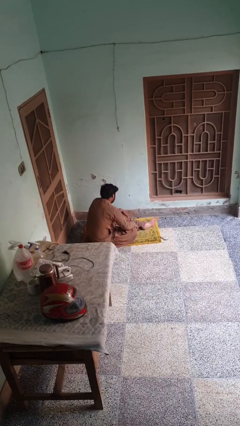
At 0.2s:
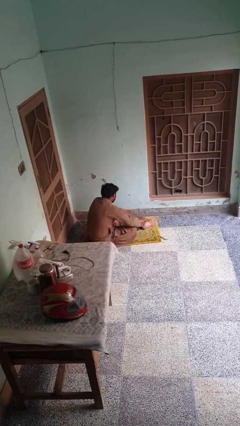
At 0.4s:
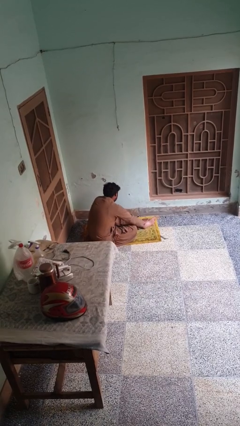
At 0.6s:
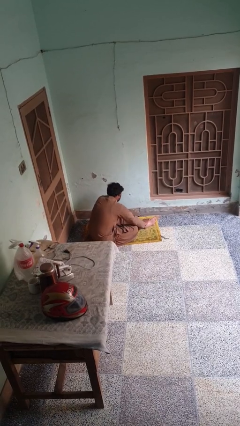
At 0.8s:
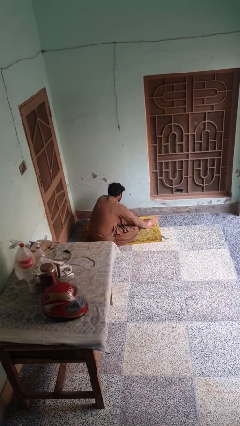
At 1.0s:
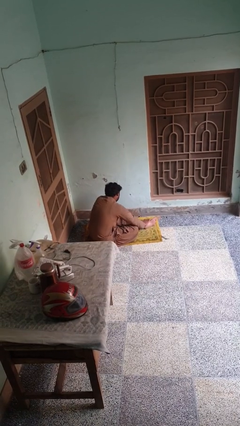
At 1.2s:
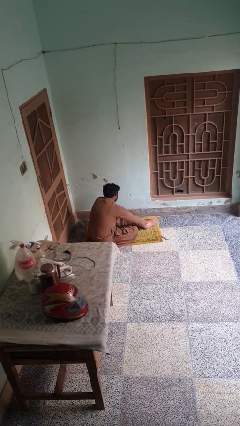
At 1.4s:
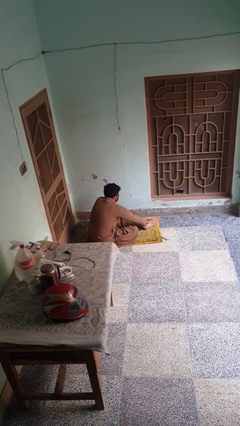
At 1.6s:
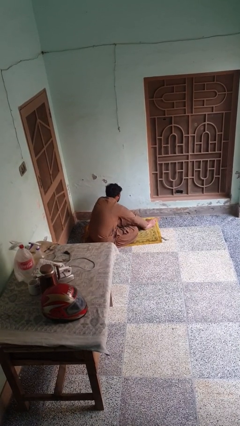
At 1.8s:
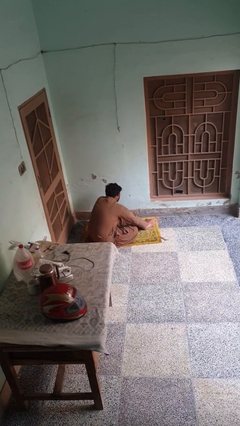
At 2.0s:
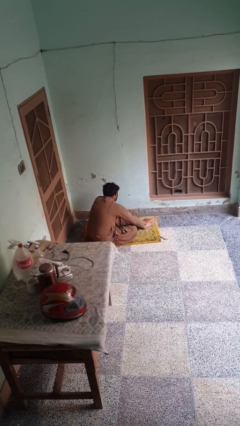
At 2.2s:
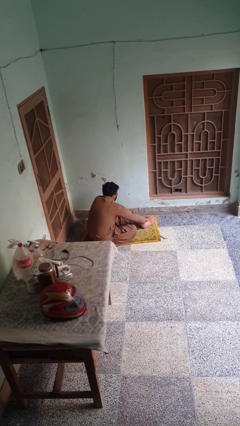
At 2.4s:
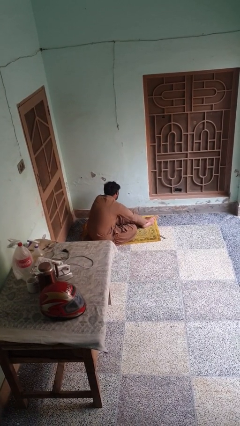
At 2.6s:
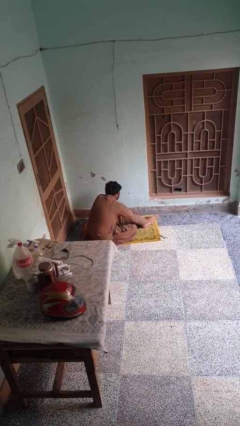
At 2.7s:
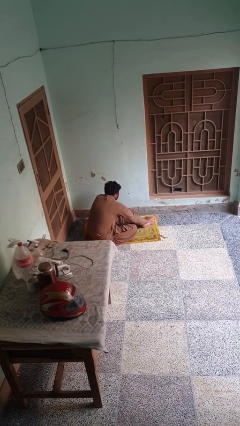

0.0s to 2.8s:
person rubs foot

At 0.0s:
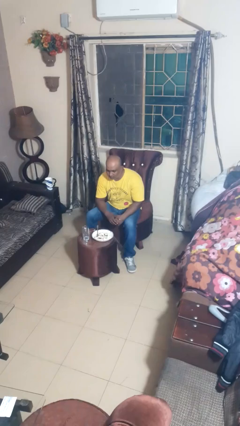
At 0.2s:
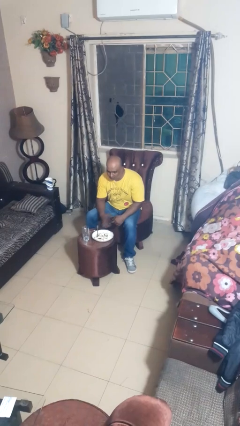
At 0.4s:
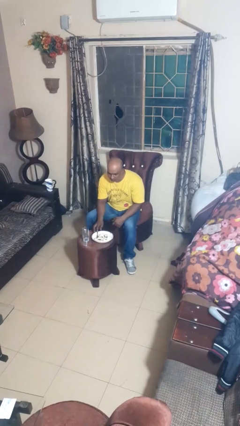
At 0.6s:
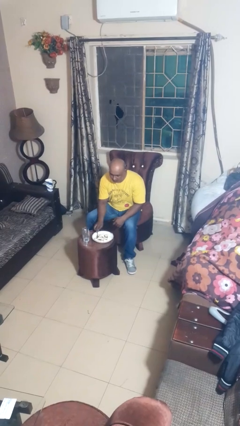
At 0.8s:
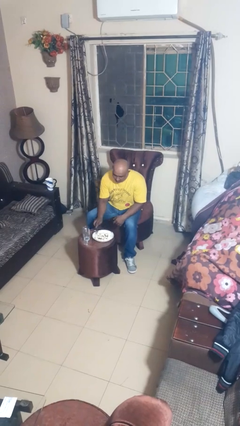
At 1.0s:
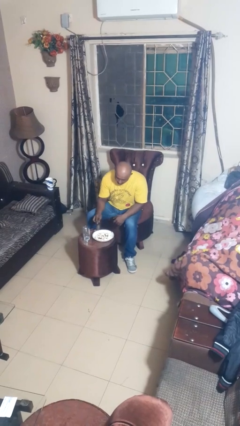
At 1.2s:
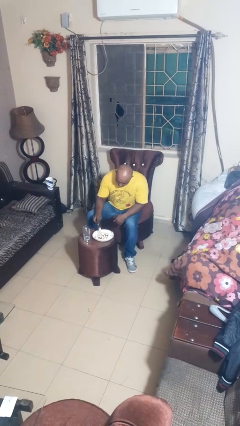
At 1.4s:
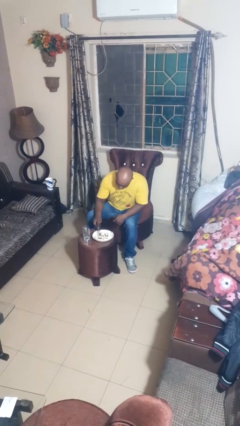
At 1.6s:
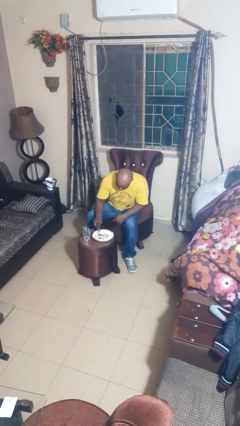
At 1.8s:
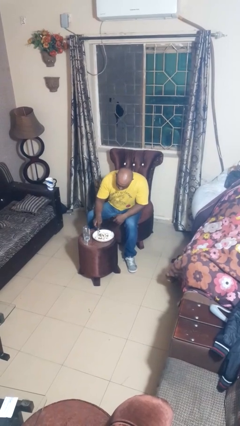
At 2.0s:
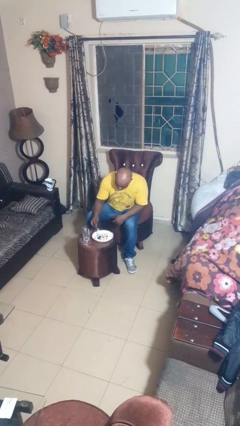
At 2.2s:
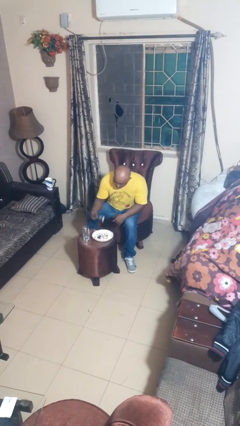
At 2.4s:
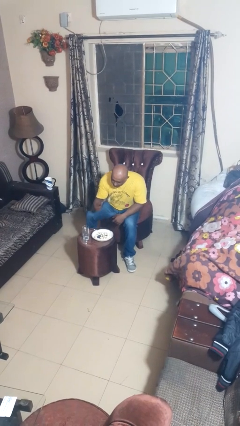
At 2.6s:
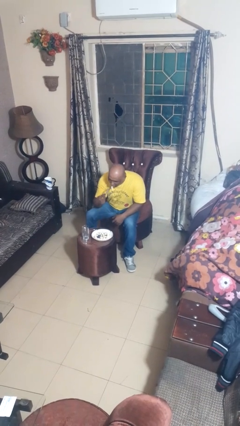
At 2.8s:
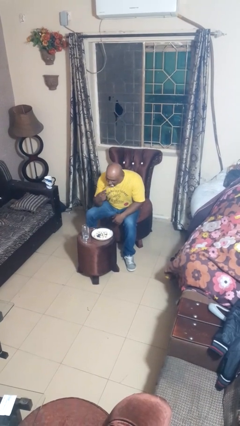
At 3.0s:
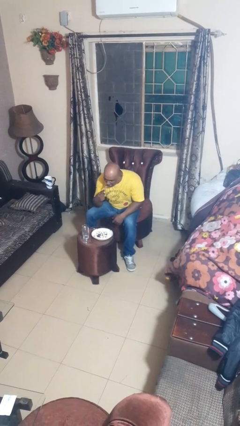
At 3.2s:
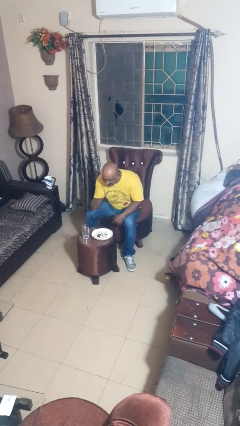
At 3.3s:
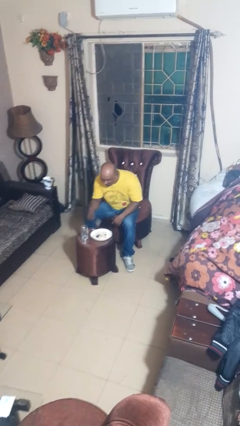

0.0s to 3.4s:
person eats with utensil

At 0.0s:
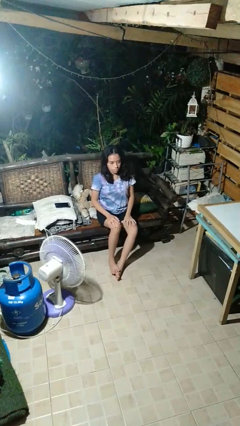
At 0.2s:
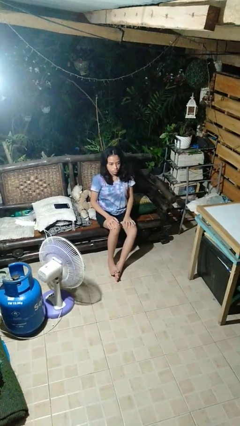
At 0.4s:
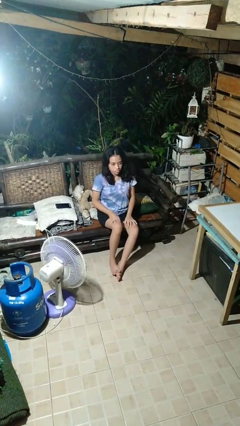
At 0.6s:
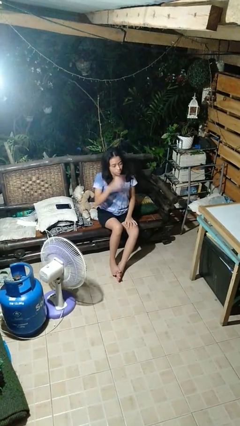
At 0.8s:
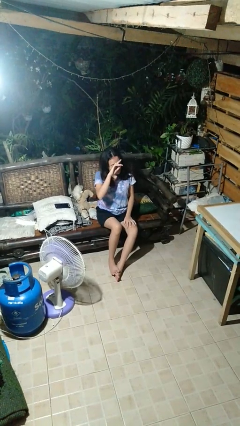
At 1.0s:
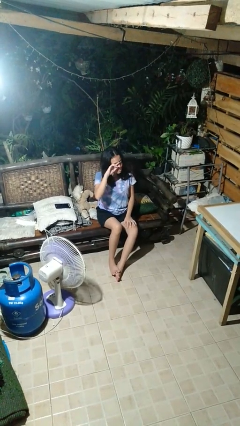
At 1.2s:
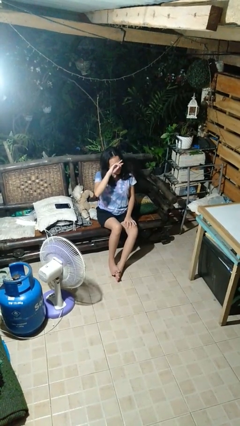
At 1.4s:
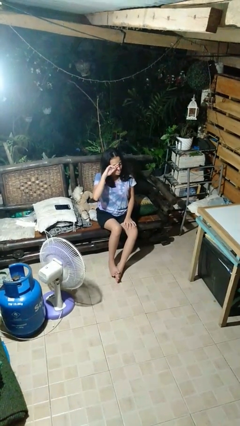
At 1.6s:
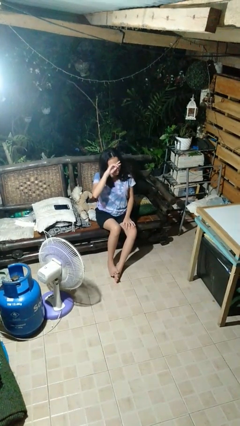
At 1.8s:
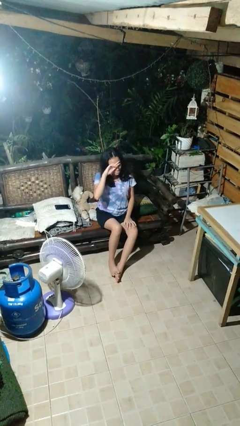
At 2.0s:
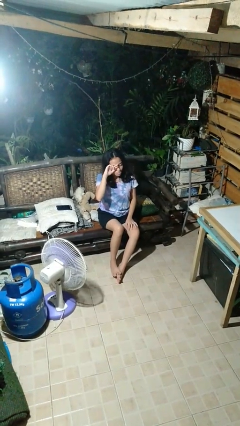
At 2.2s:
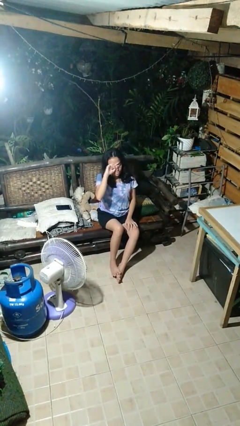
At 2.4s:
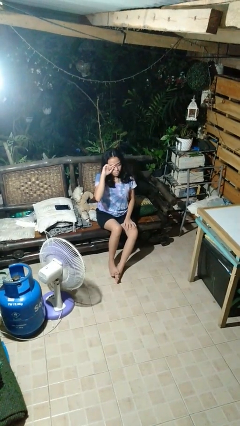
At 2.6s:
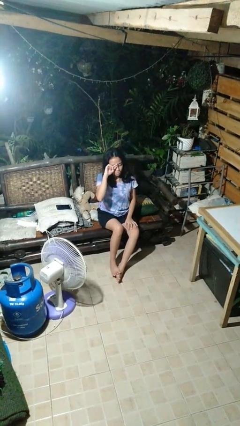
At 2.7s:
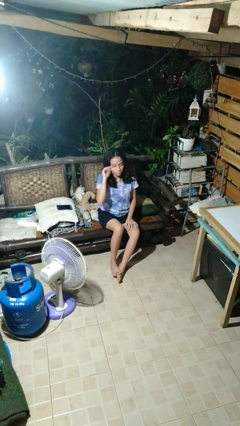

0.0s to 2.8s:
person rubs eyes

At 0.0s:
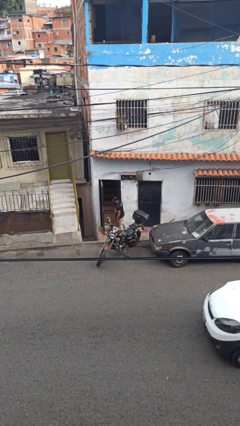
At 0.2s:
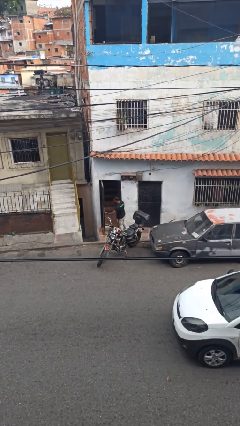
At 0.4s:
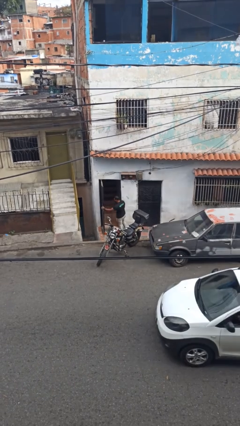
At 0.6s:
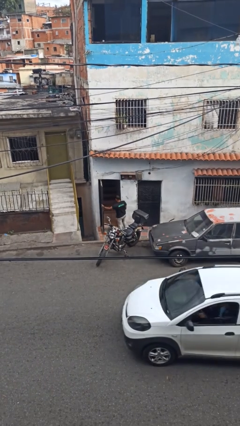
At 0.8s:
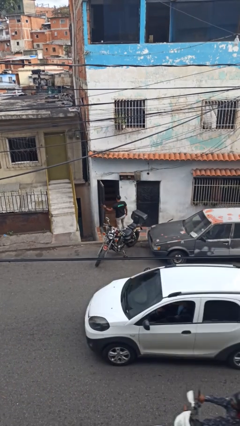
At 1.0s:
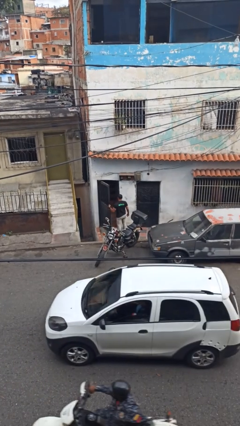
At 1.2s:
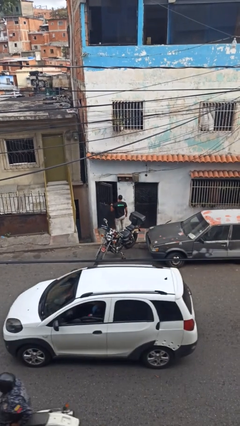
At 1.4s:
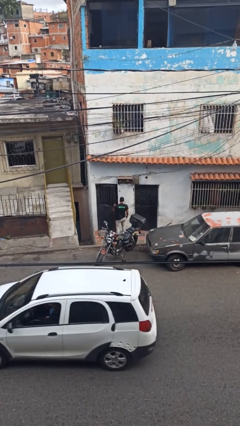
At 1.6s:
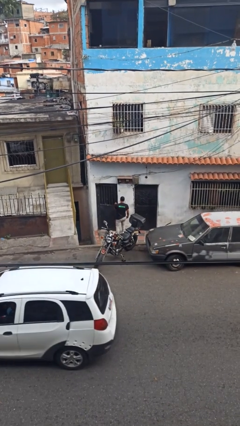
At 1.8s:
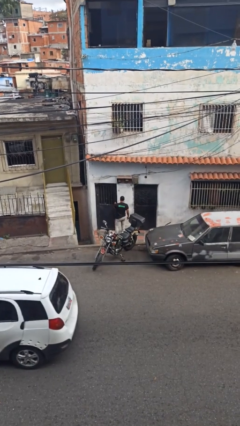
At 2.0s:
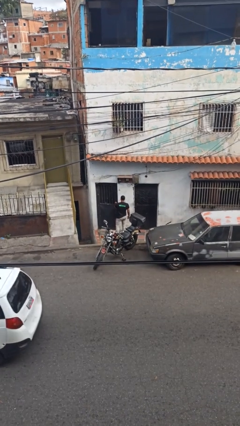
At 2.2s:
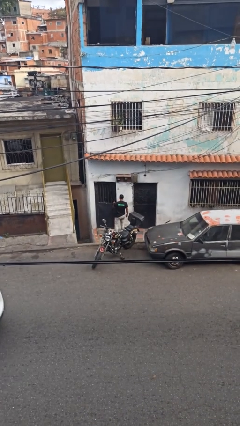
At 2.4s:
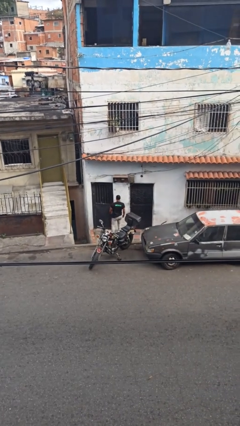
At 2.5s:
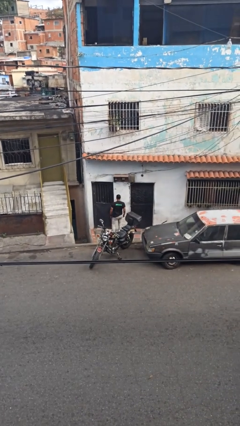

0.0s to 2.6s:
person closes facility door

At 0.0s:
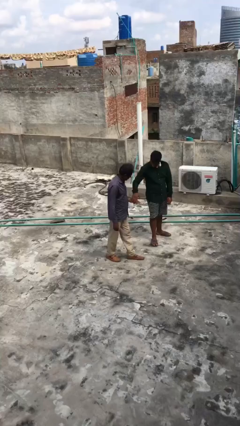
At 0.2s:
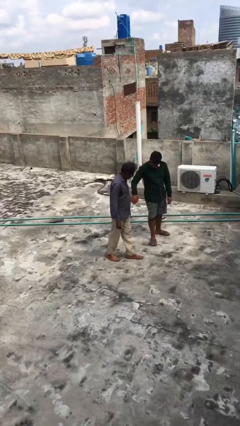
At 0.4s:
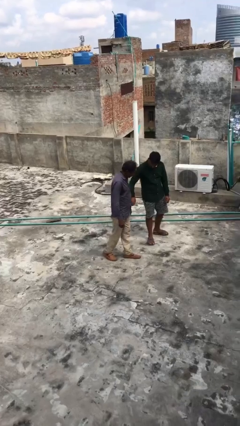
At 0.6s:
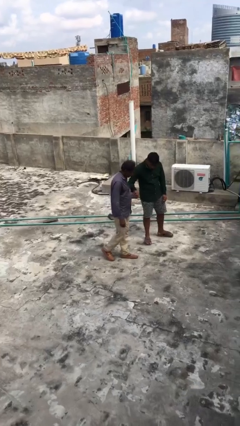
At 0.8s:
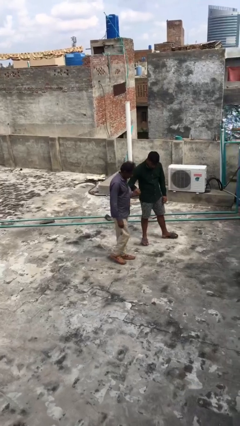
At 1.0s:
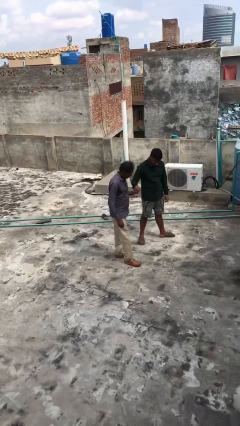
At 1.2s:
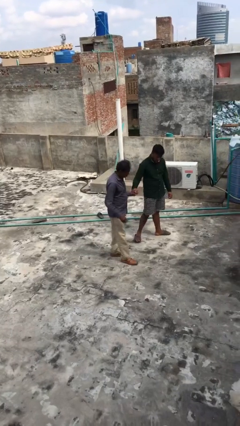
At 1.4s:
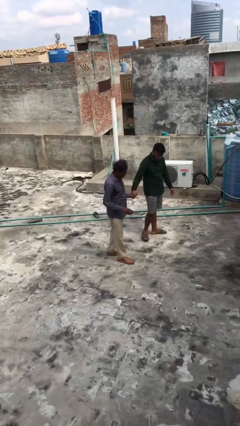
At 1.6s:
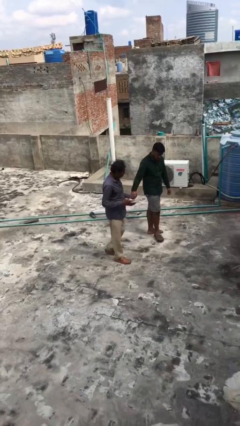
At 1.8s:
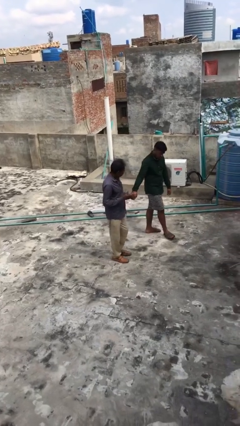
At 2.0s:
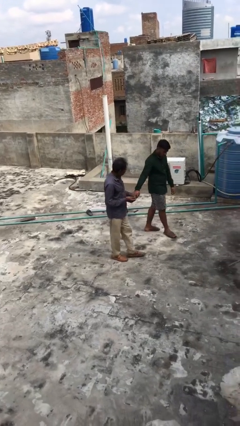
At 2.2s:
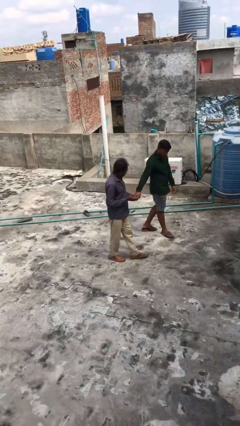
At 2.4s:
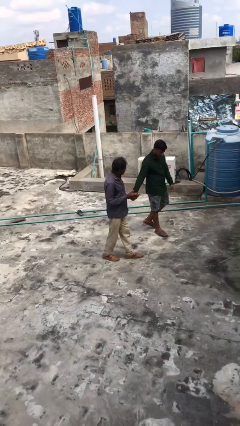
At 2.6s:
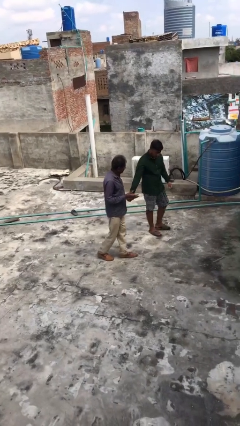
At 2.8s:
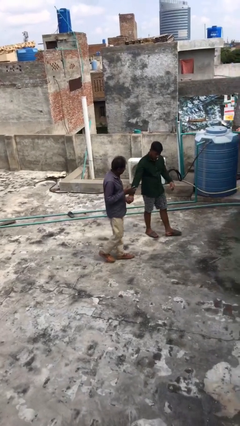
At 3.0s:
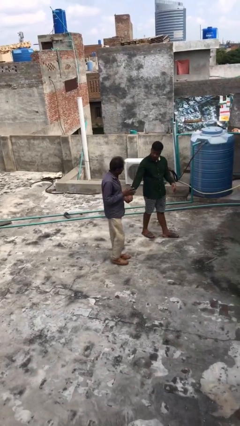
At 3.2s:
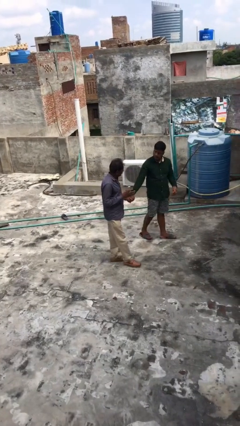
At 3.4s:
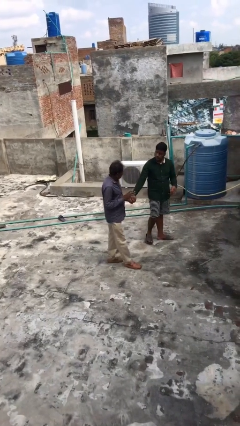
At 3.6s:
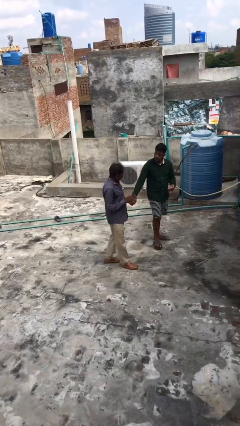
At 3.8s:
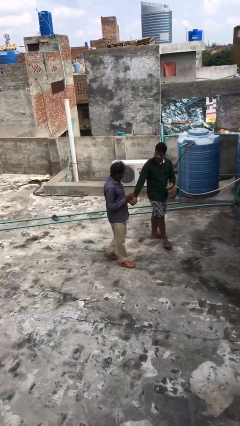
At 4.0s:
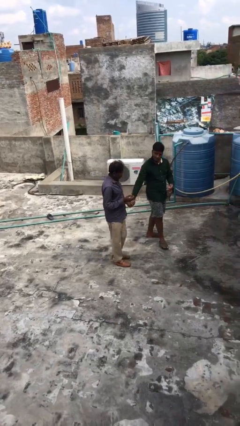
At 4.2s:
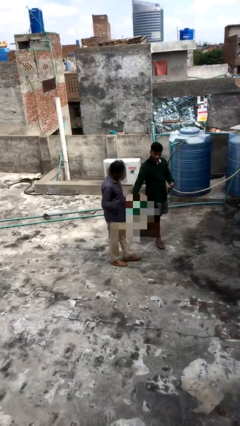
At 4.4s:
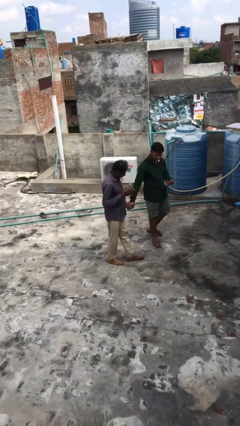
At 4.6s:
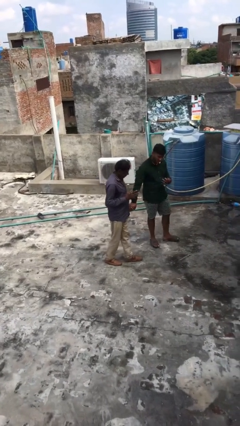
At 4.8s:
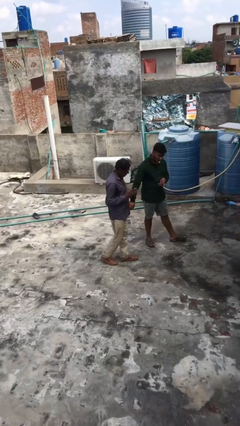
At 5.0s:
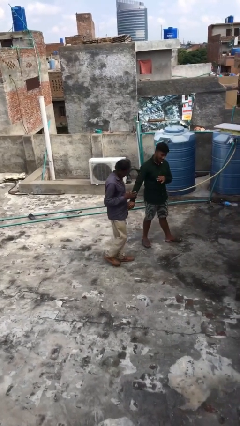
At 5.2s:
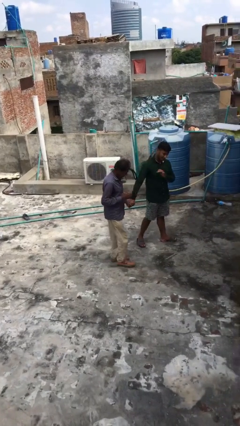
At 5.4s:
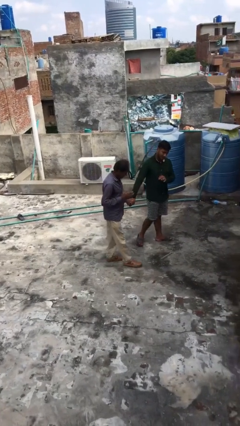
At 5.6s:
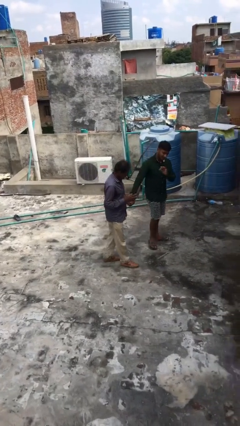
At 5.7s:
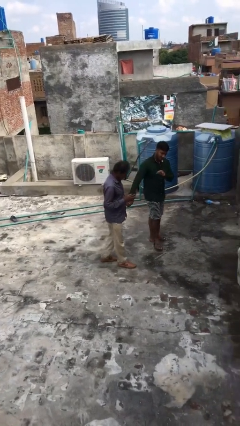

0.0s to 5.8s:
person holds hand
